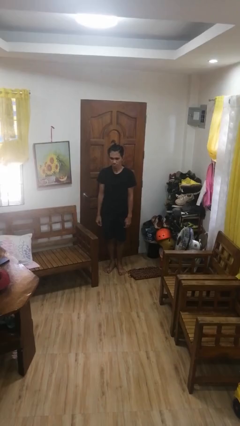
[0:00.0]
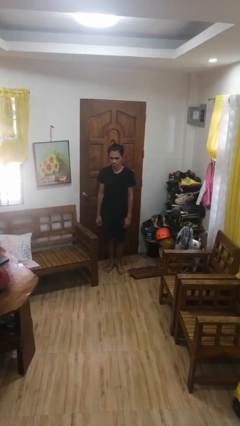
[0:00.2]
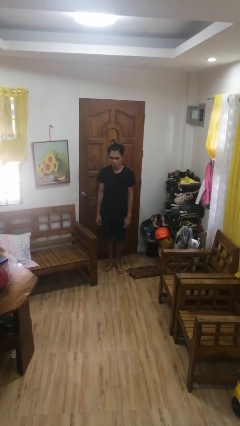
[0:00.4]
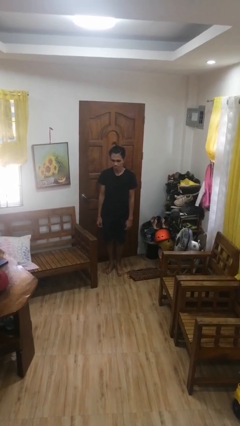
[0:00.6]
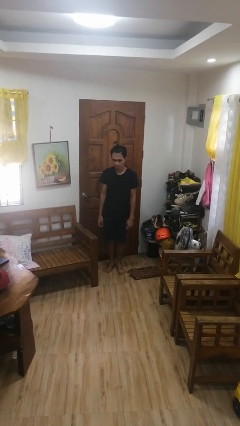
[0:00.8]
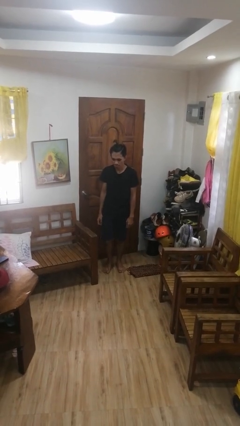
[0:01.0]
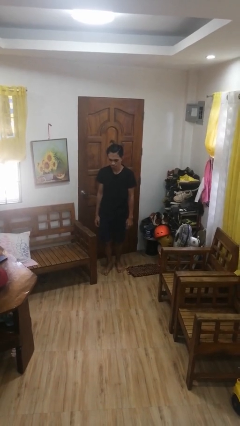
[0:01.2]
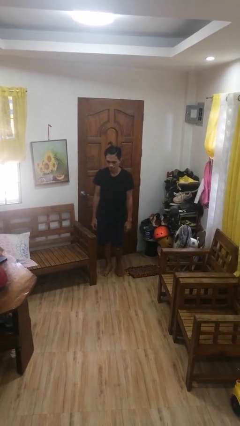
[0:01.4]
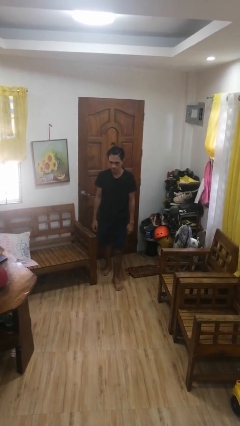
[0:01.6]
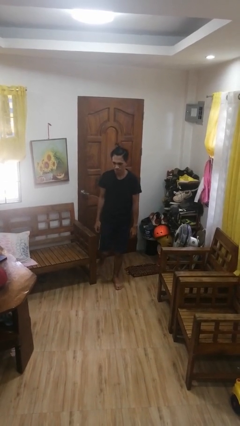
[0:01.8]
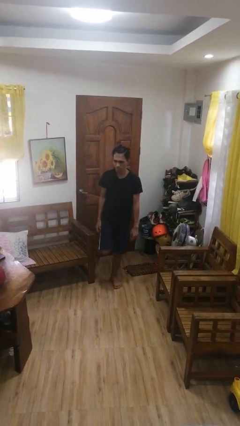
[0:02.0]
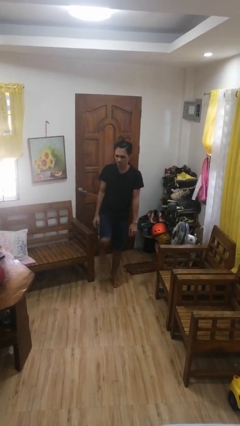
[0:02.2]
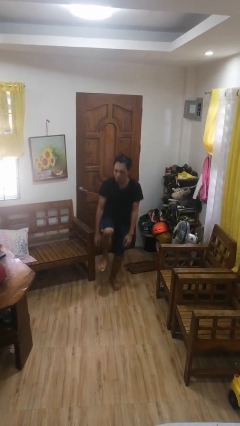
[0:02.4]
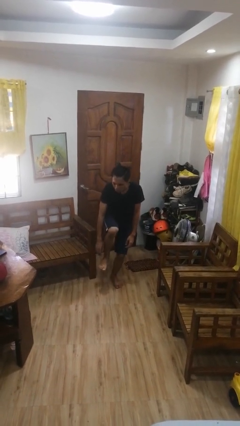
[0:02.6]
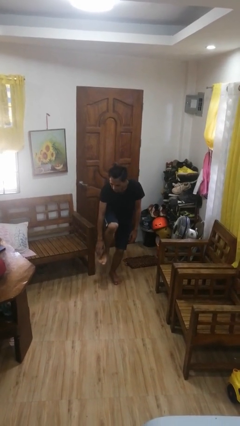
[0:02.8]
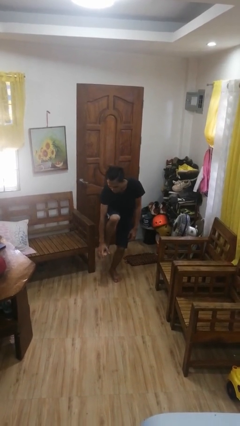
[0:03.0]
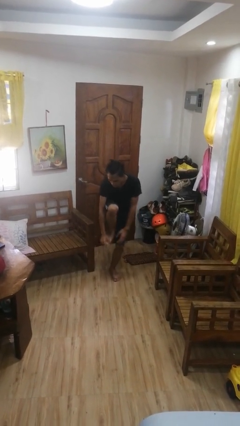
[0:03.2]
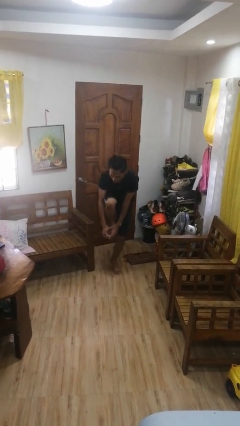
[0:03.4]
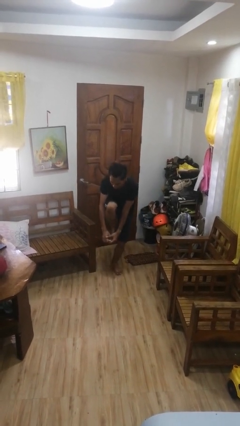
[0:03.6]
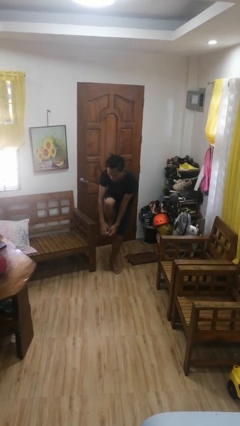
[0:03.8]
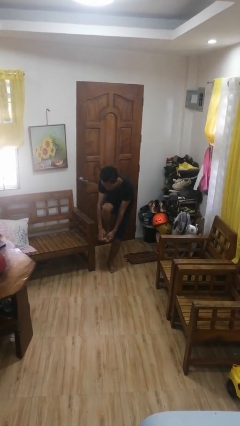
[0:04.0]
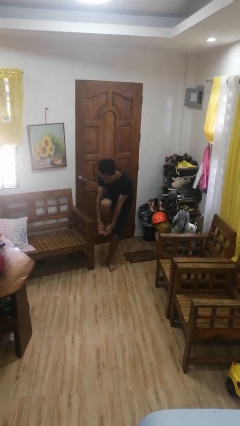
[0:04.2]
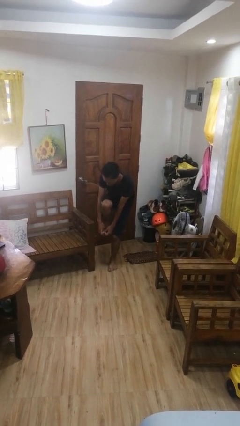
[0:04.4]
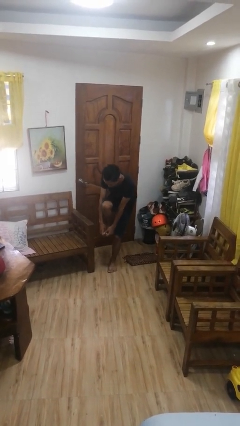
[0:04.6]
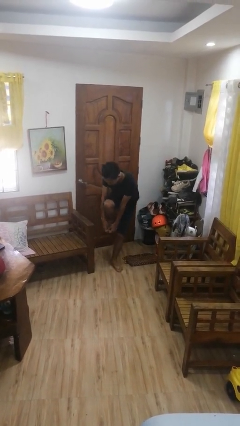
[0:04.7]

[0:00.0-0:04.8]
person stubs toe

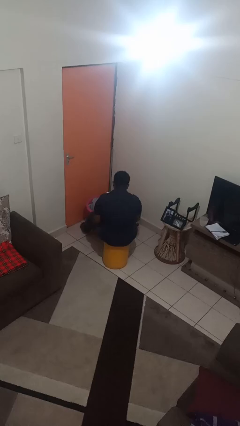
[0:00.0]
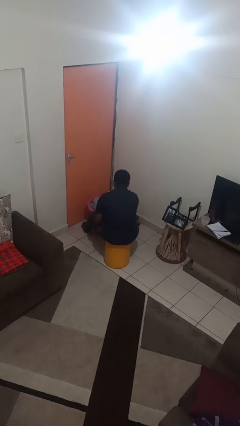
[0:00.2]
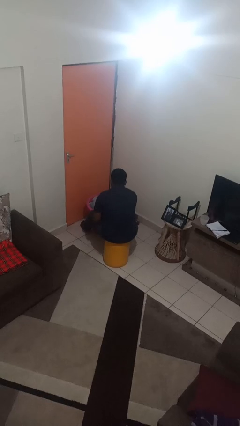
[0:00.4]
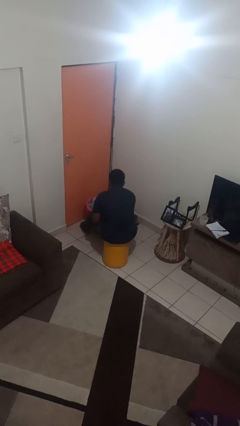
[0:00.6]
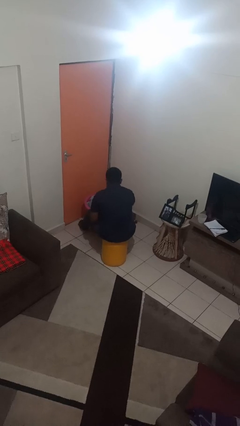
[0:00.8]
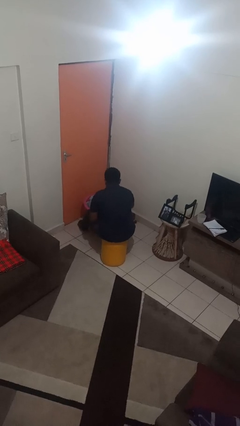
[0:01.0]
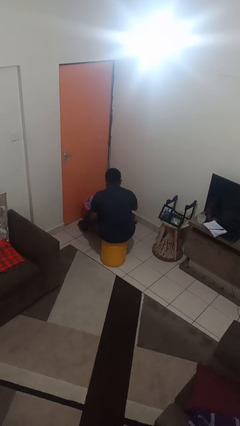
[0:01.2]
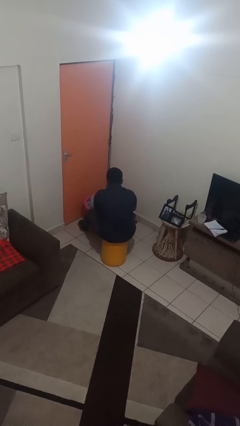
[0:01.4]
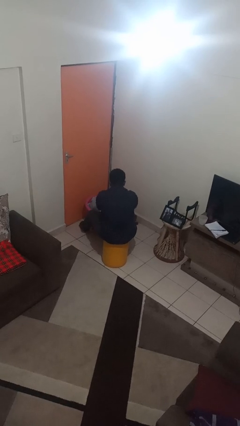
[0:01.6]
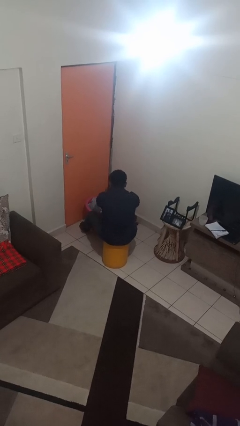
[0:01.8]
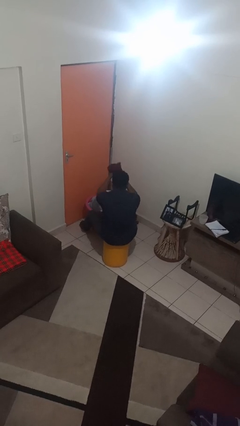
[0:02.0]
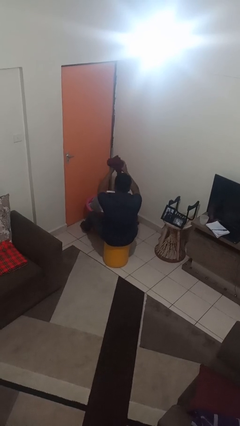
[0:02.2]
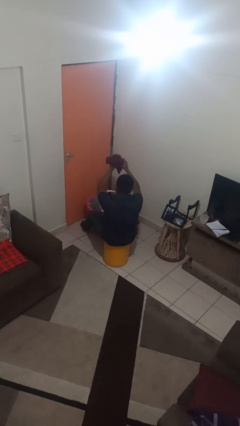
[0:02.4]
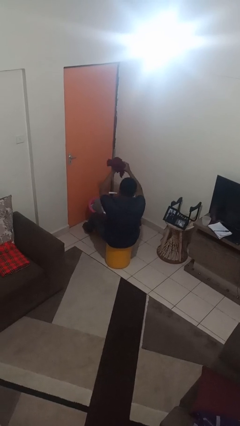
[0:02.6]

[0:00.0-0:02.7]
person takes object from basket

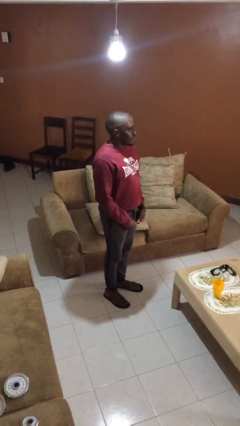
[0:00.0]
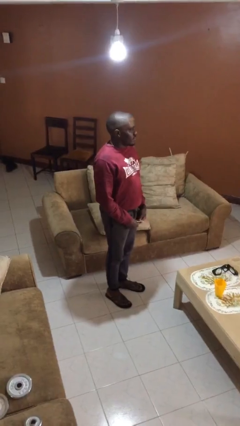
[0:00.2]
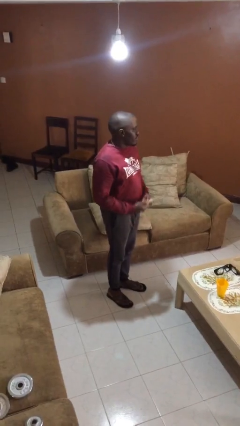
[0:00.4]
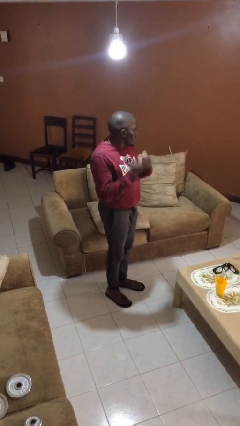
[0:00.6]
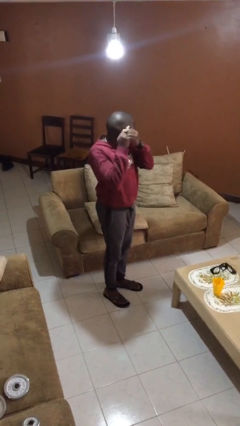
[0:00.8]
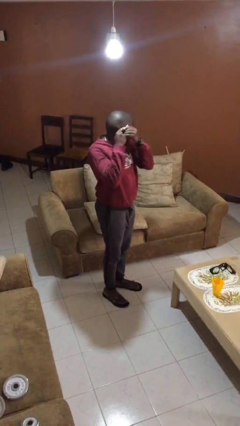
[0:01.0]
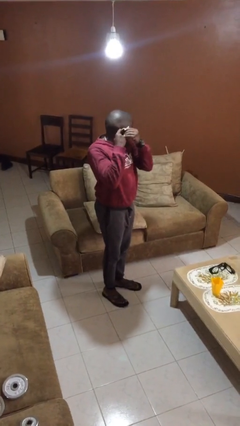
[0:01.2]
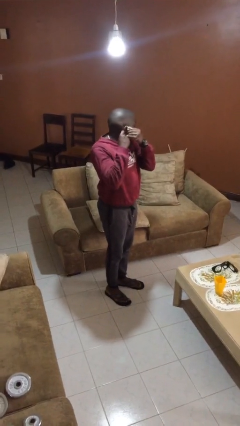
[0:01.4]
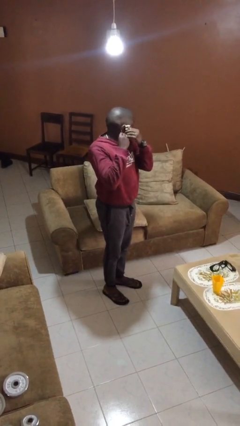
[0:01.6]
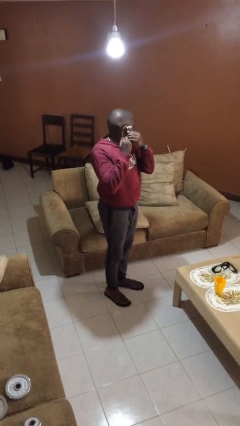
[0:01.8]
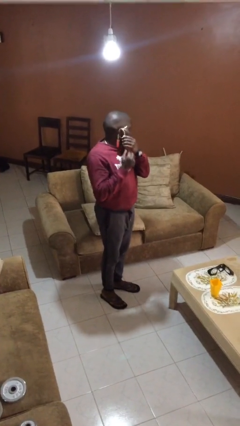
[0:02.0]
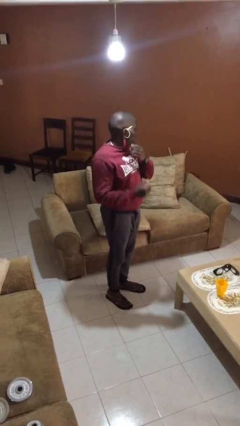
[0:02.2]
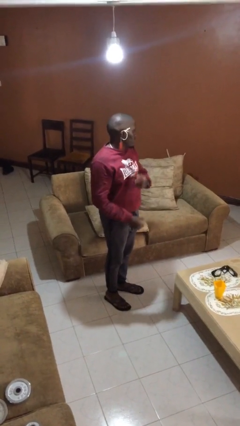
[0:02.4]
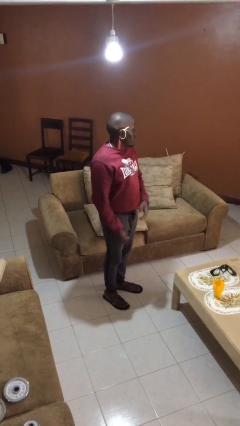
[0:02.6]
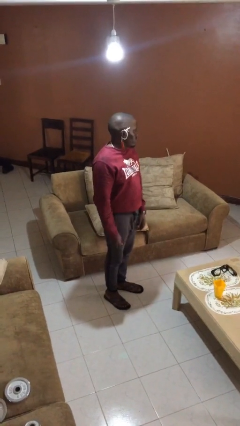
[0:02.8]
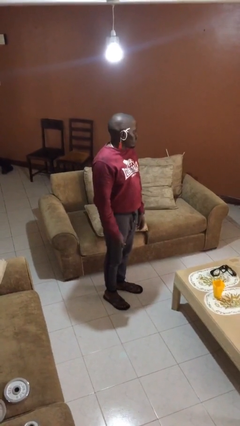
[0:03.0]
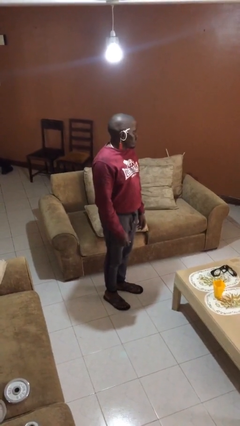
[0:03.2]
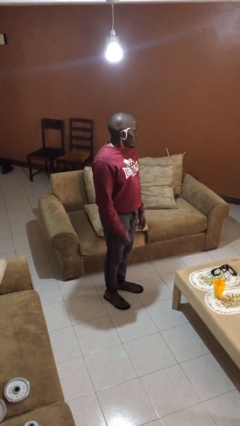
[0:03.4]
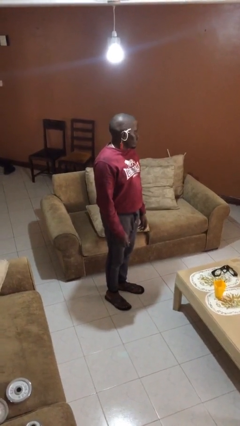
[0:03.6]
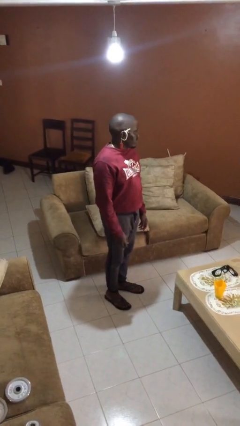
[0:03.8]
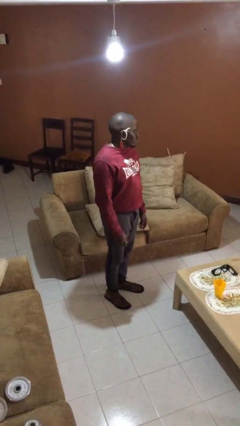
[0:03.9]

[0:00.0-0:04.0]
person puts on earrings

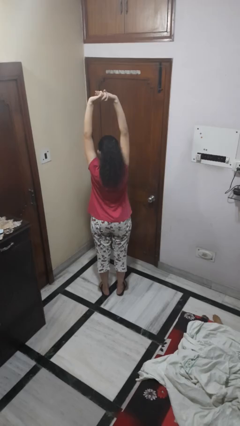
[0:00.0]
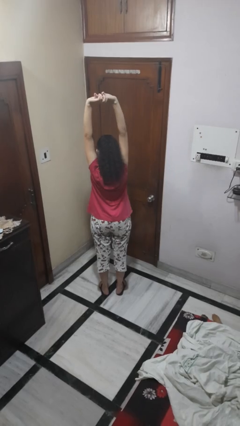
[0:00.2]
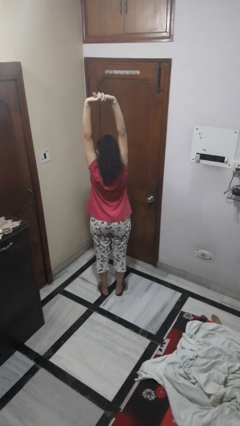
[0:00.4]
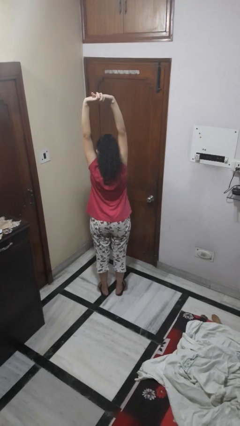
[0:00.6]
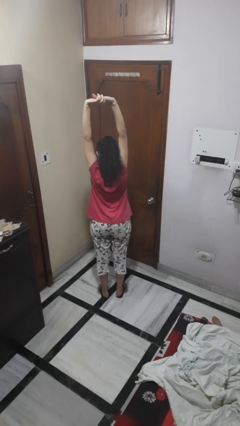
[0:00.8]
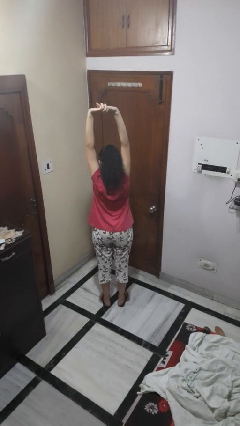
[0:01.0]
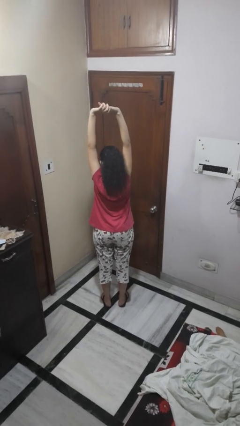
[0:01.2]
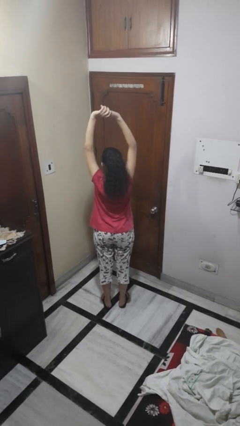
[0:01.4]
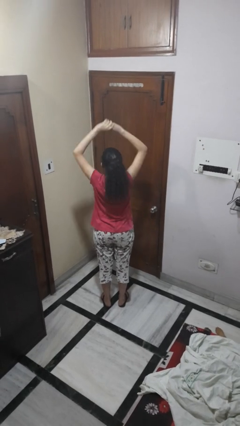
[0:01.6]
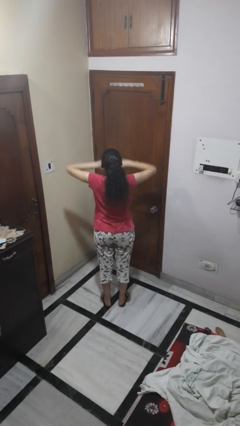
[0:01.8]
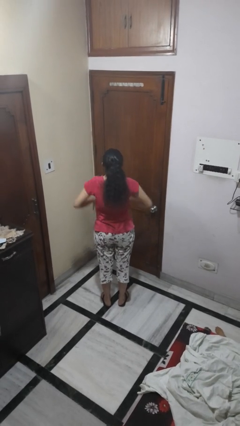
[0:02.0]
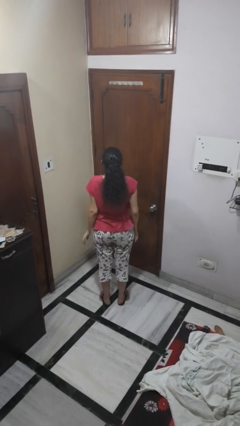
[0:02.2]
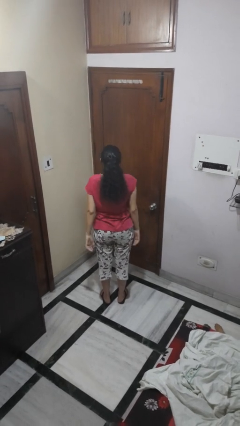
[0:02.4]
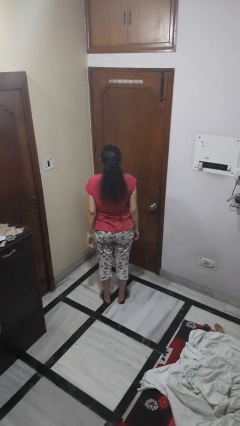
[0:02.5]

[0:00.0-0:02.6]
person stretches arms over head

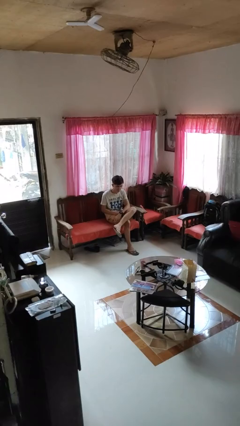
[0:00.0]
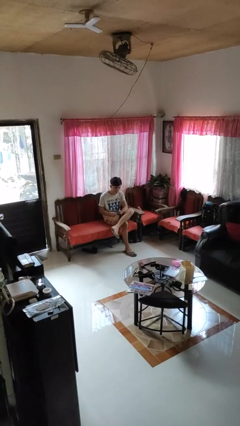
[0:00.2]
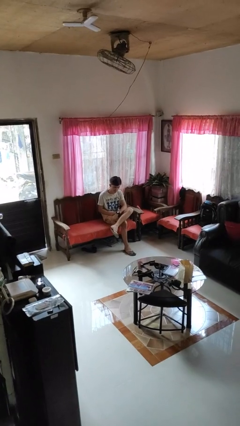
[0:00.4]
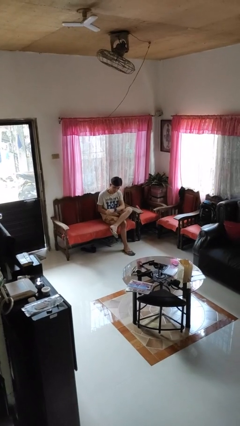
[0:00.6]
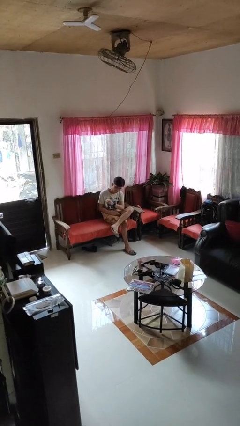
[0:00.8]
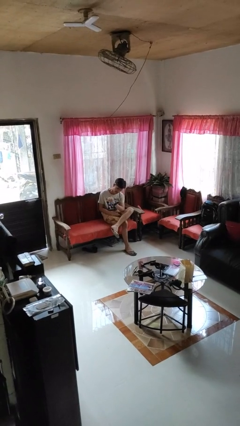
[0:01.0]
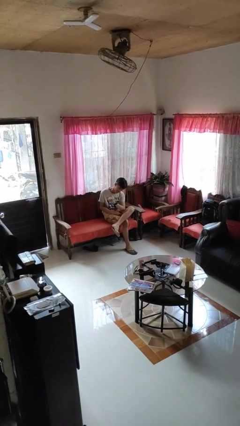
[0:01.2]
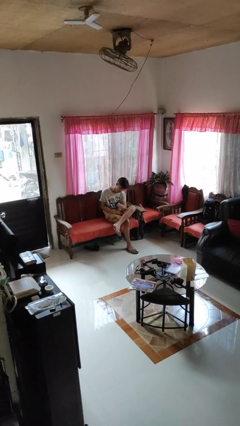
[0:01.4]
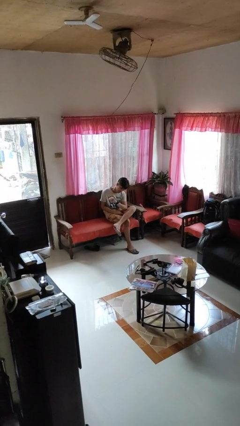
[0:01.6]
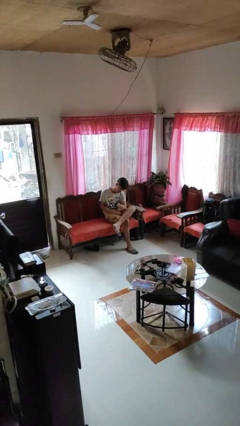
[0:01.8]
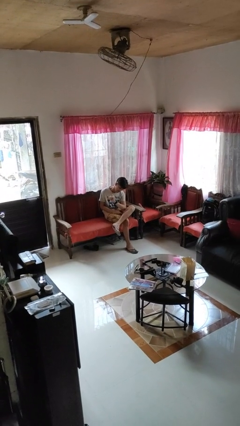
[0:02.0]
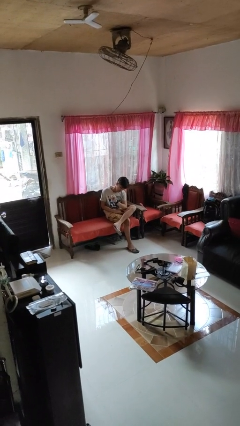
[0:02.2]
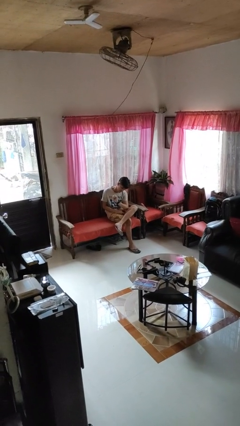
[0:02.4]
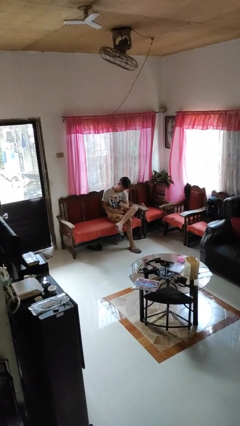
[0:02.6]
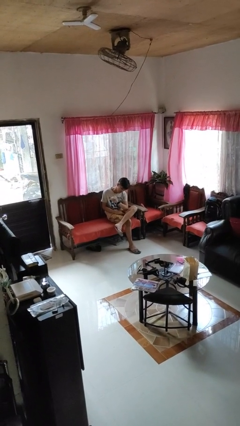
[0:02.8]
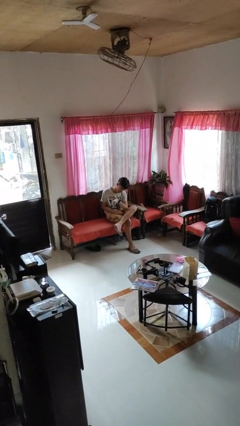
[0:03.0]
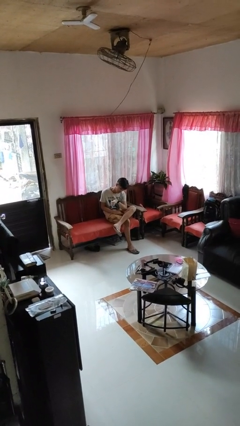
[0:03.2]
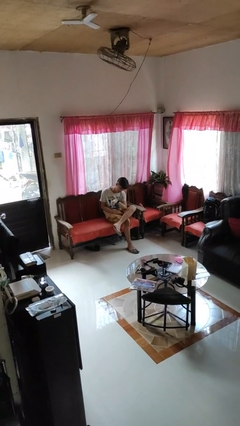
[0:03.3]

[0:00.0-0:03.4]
person looks at wristwatch
